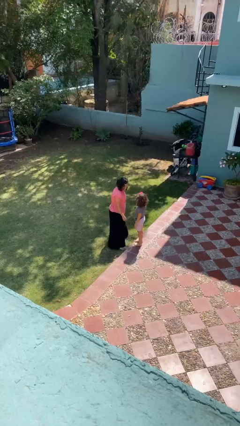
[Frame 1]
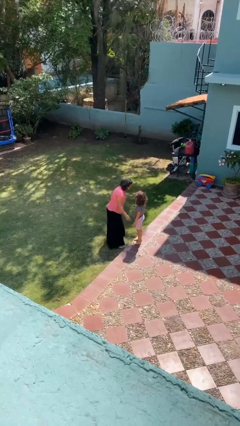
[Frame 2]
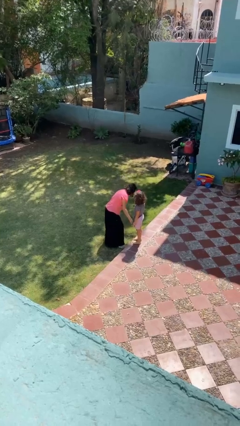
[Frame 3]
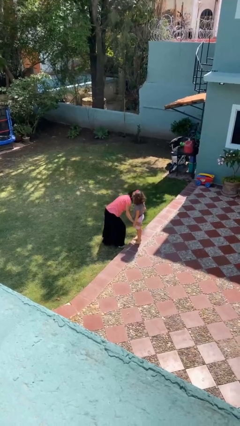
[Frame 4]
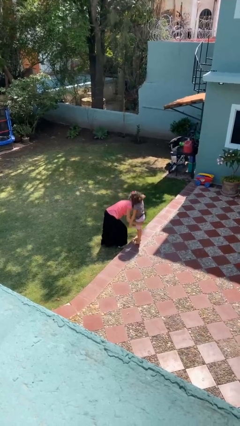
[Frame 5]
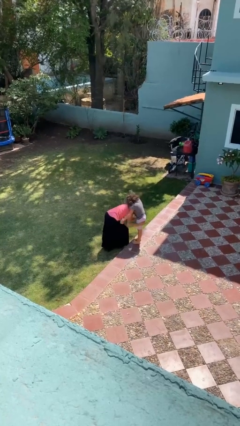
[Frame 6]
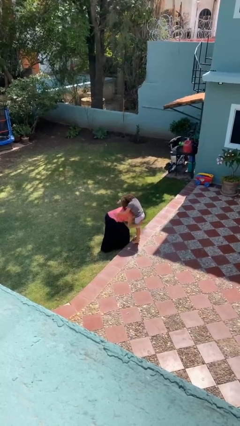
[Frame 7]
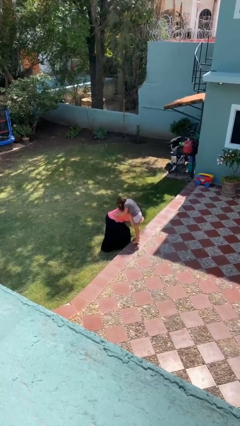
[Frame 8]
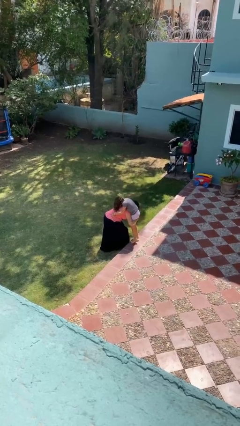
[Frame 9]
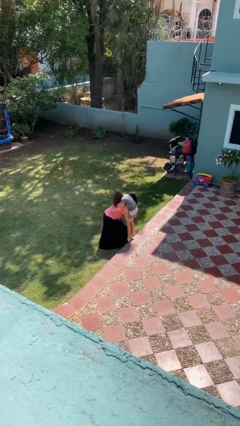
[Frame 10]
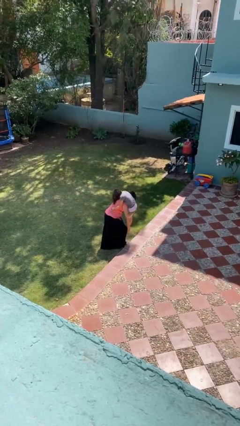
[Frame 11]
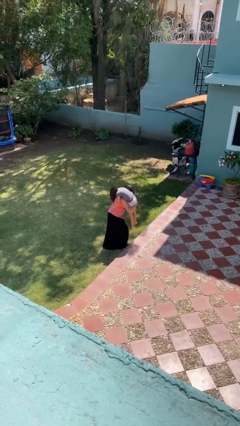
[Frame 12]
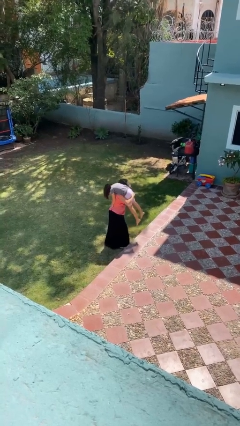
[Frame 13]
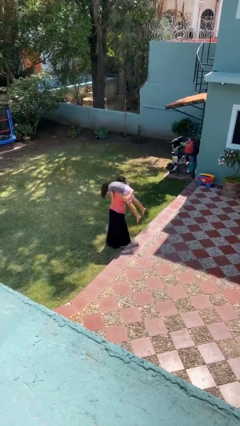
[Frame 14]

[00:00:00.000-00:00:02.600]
person carries person over shoulder

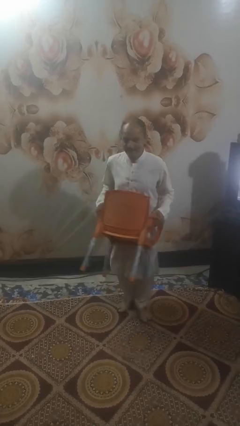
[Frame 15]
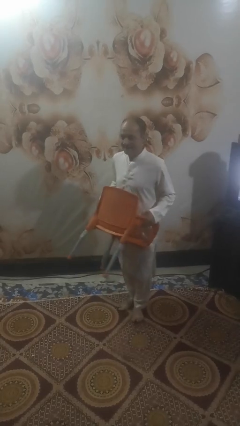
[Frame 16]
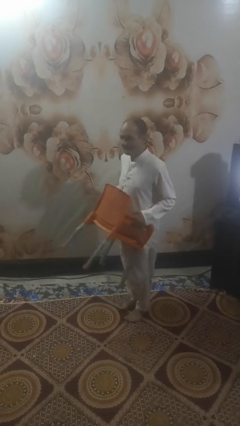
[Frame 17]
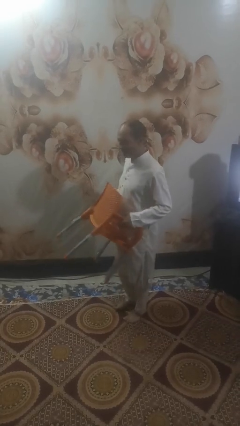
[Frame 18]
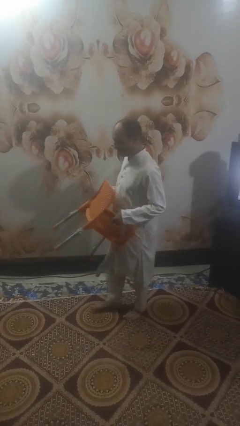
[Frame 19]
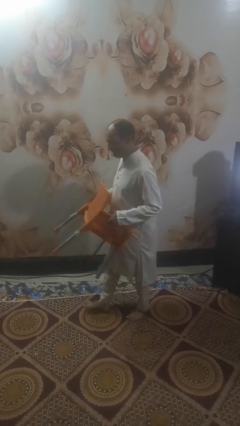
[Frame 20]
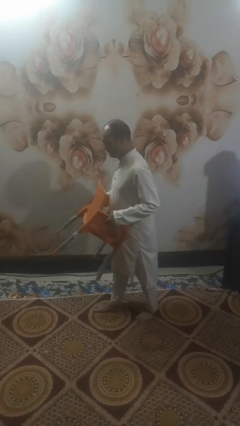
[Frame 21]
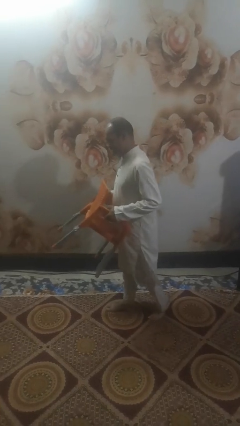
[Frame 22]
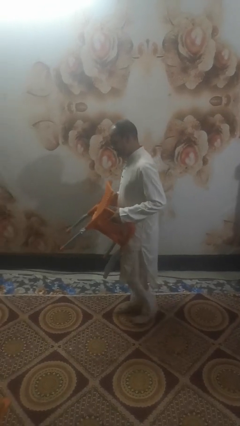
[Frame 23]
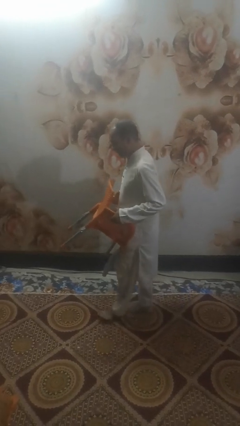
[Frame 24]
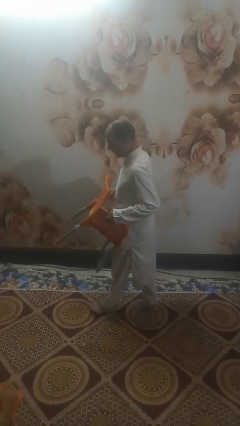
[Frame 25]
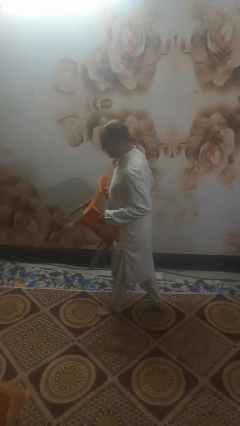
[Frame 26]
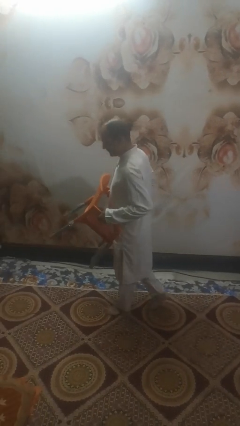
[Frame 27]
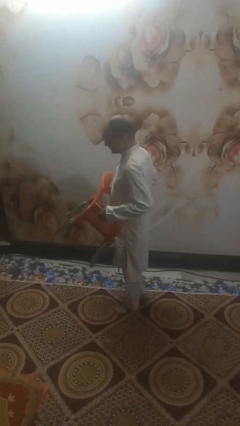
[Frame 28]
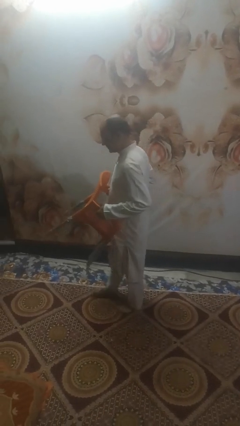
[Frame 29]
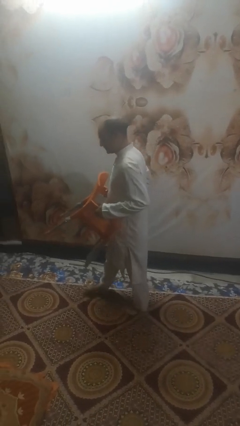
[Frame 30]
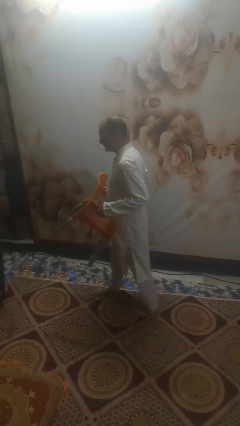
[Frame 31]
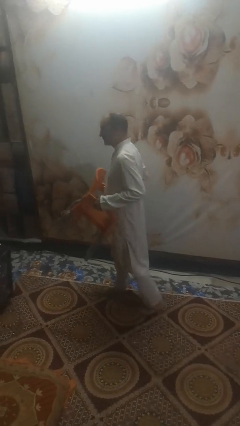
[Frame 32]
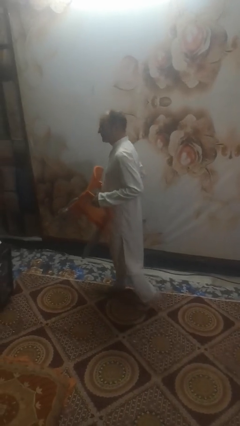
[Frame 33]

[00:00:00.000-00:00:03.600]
person carries furniture

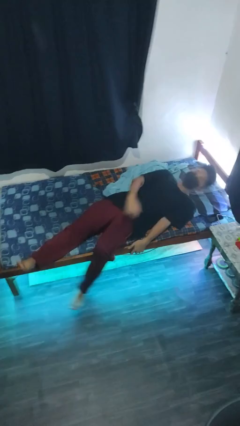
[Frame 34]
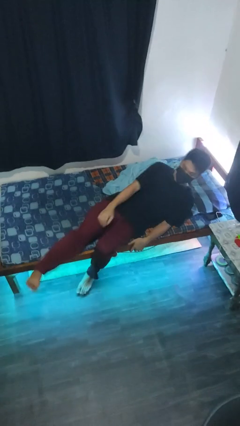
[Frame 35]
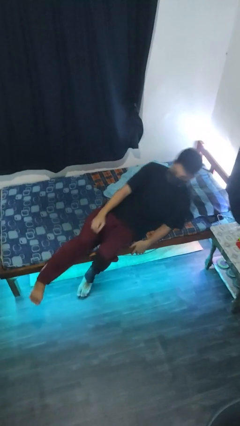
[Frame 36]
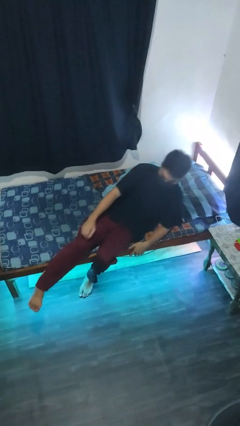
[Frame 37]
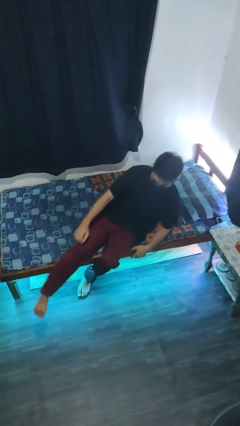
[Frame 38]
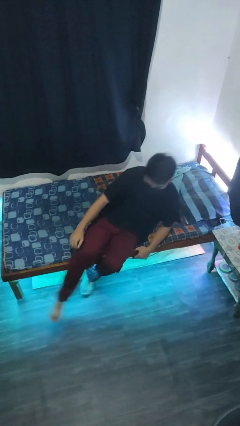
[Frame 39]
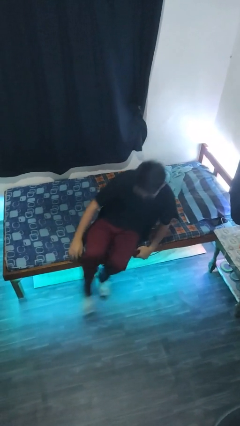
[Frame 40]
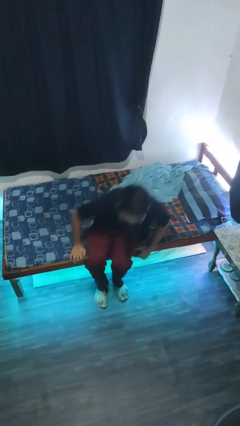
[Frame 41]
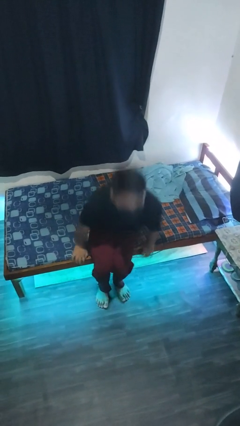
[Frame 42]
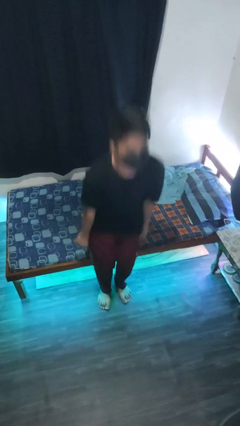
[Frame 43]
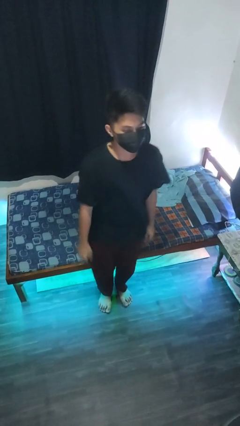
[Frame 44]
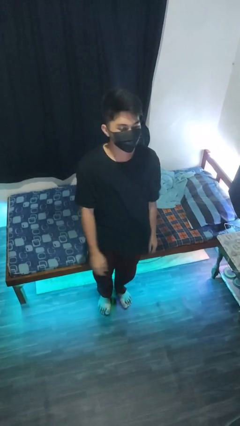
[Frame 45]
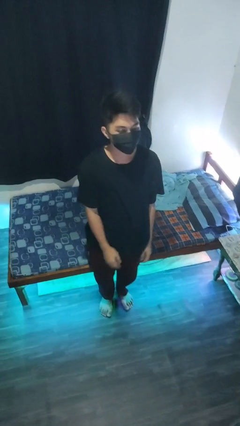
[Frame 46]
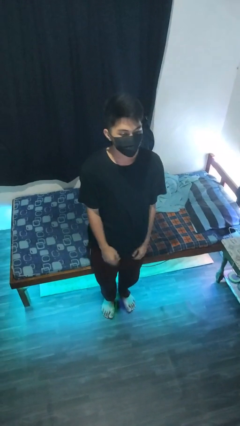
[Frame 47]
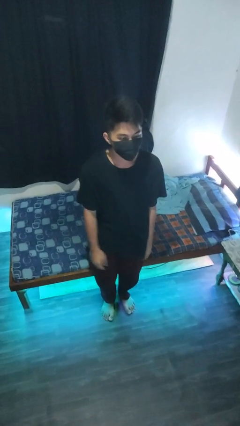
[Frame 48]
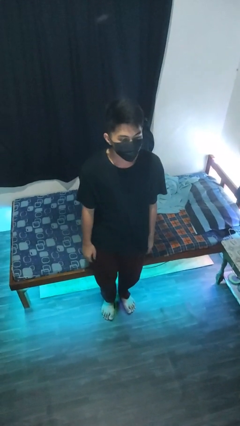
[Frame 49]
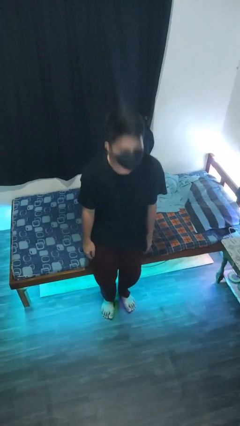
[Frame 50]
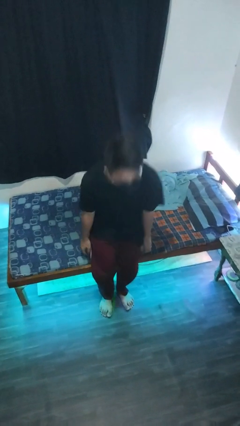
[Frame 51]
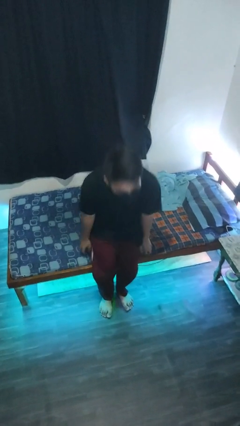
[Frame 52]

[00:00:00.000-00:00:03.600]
person stands up

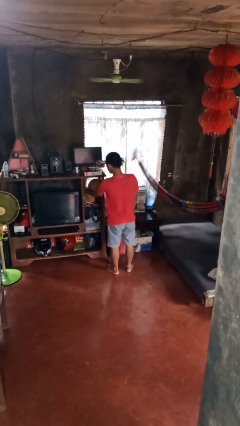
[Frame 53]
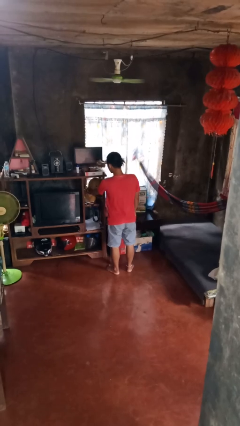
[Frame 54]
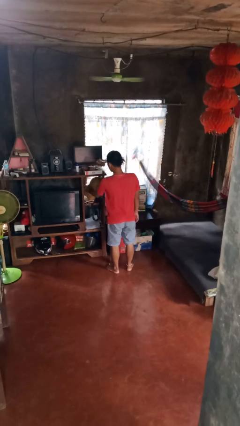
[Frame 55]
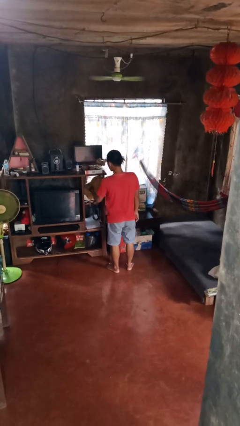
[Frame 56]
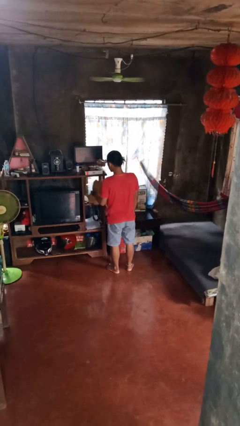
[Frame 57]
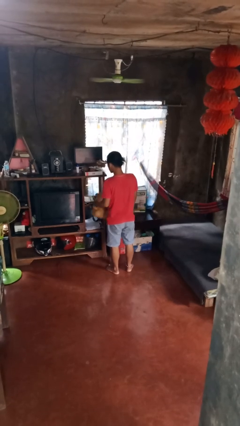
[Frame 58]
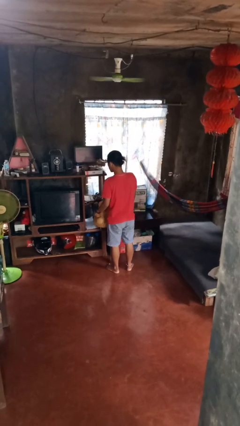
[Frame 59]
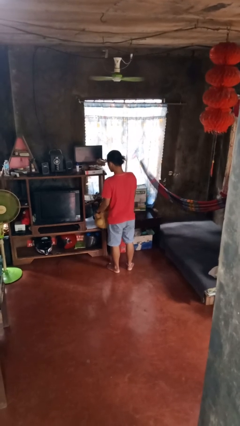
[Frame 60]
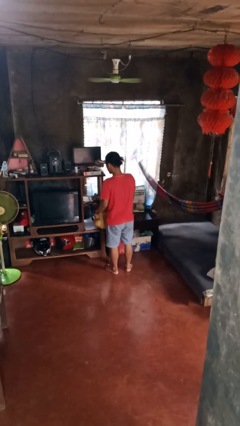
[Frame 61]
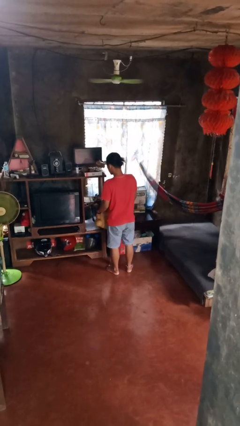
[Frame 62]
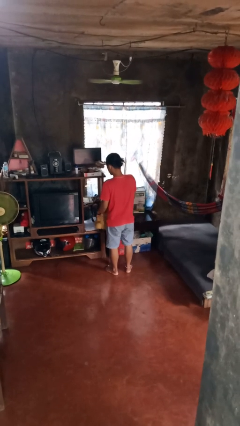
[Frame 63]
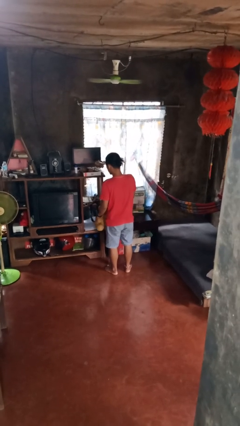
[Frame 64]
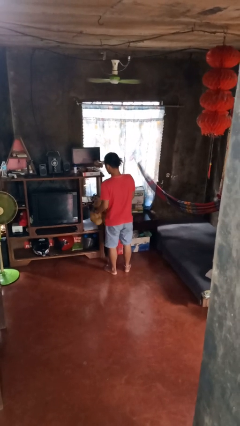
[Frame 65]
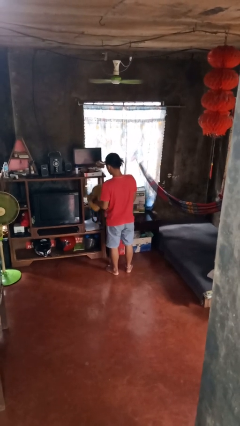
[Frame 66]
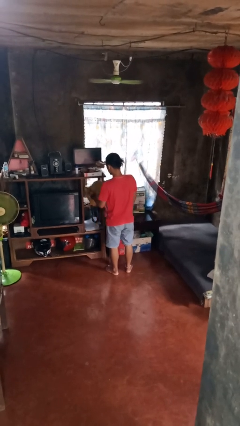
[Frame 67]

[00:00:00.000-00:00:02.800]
person picks up object from cabinet

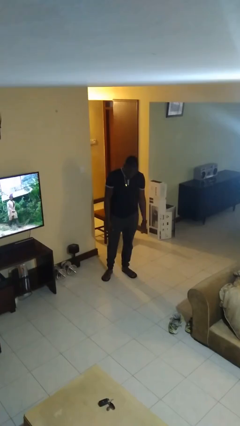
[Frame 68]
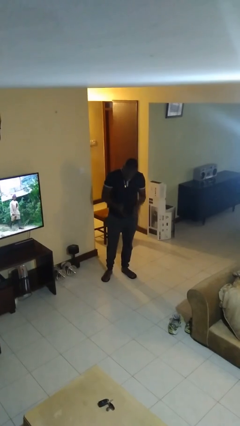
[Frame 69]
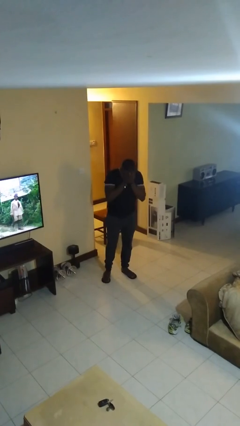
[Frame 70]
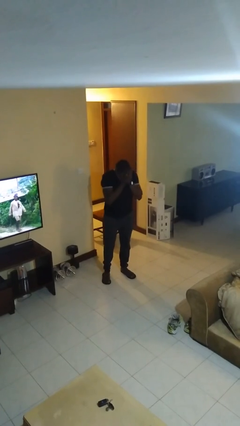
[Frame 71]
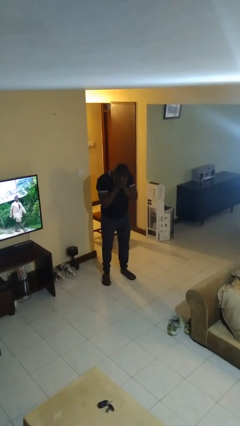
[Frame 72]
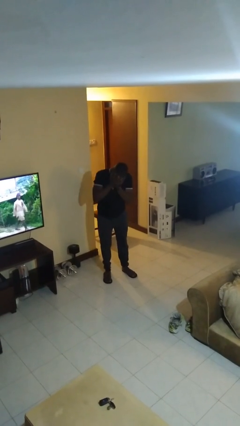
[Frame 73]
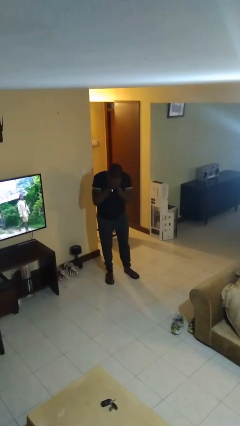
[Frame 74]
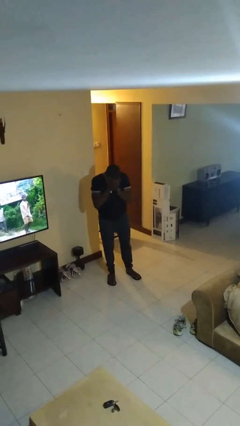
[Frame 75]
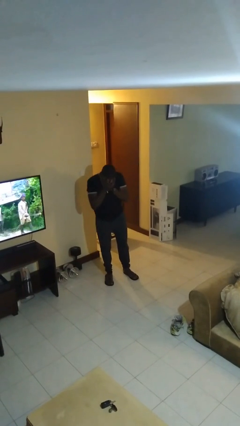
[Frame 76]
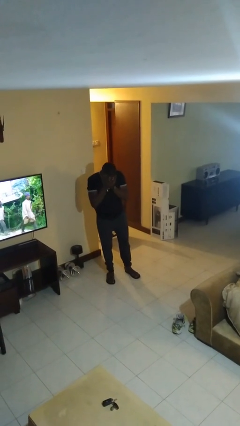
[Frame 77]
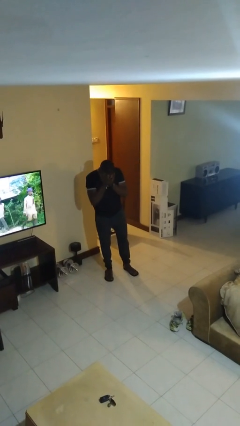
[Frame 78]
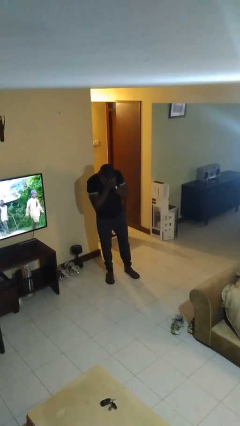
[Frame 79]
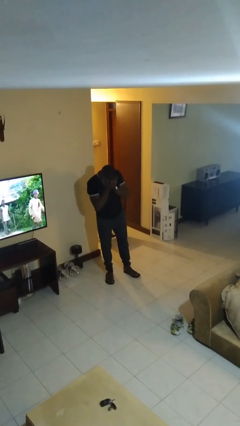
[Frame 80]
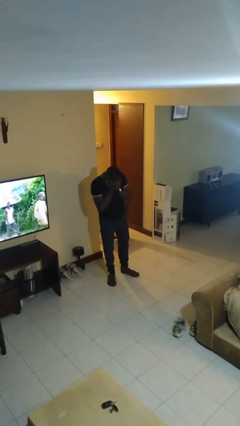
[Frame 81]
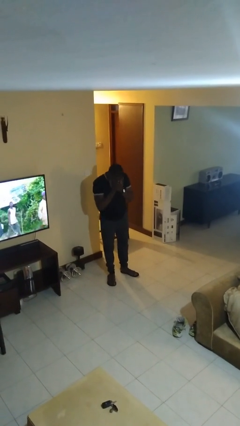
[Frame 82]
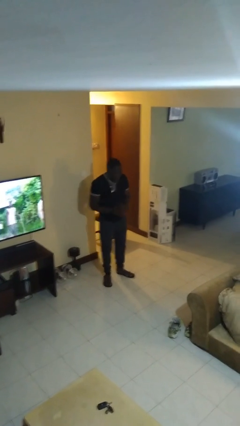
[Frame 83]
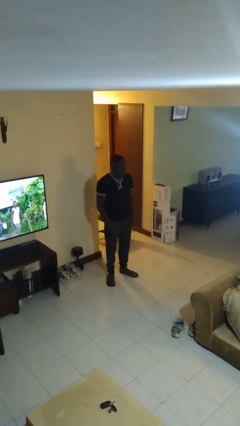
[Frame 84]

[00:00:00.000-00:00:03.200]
person covers face with hands

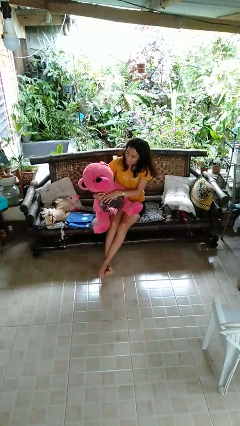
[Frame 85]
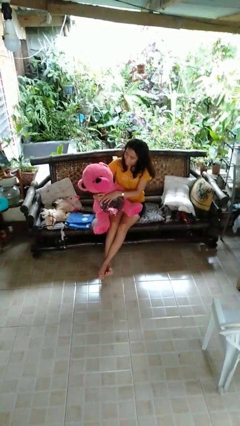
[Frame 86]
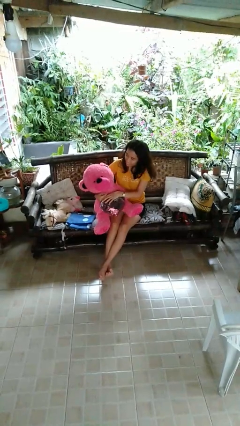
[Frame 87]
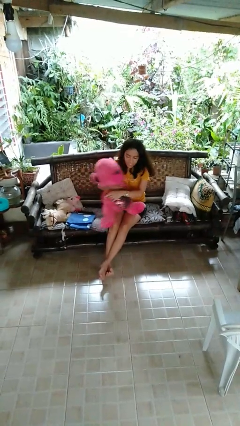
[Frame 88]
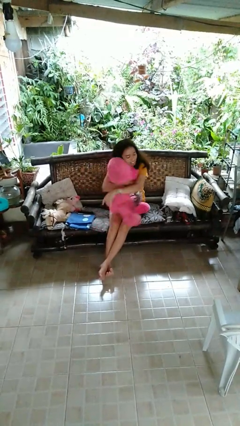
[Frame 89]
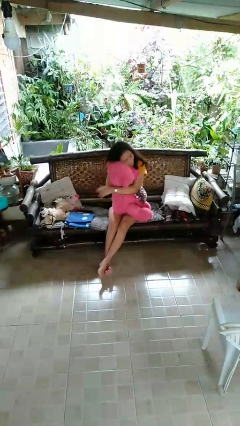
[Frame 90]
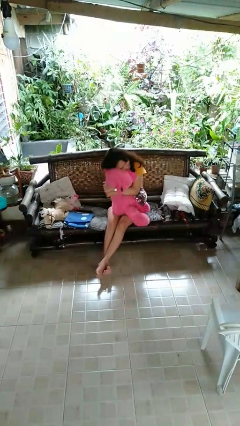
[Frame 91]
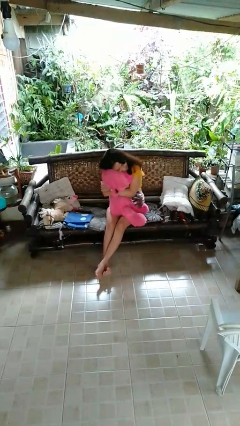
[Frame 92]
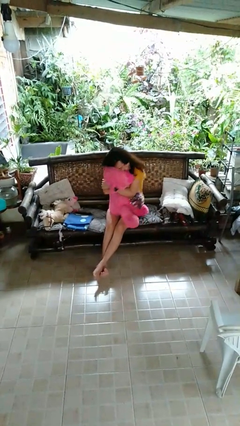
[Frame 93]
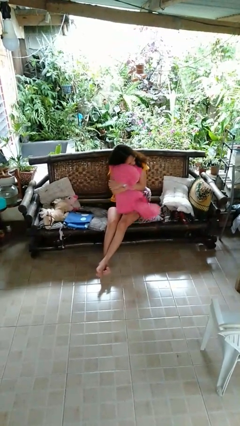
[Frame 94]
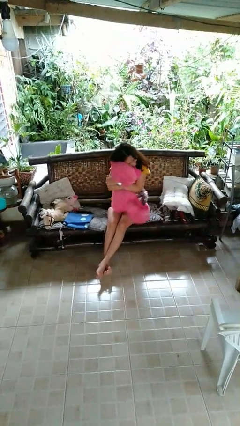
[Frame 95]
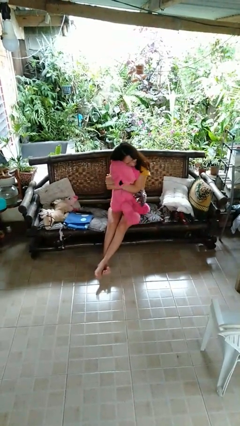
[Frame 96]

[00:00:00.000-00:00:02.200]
person hugs stuffed animal
